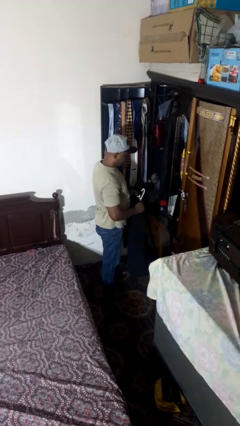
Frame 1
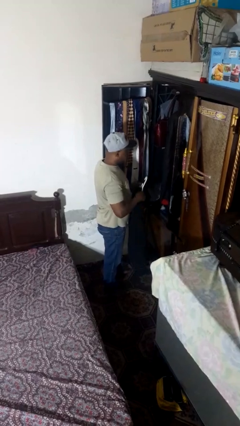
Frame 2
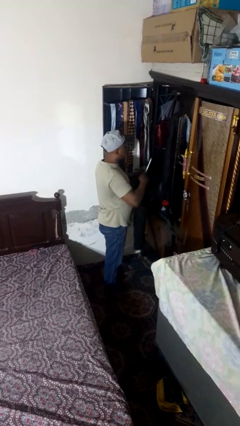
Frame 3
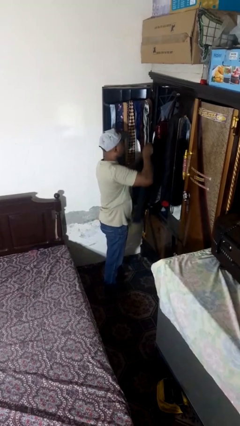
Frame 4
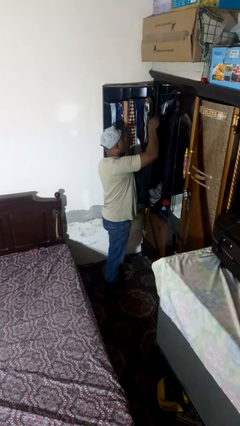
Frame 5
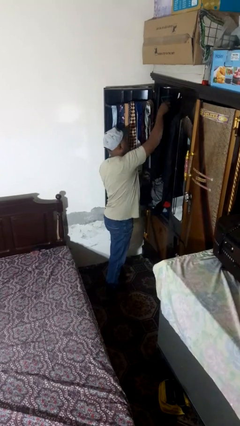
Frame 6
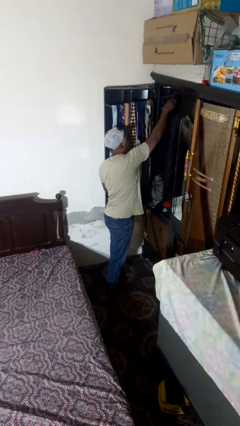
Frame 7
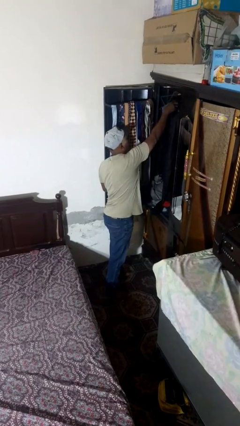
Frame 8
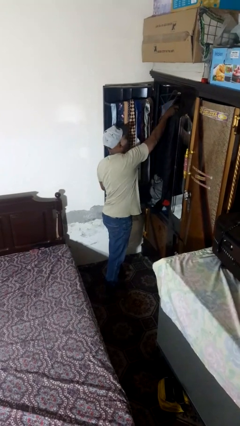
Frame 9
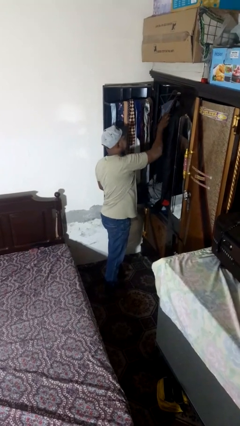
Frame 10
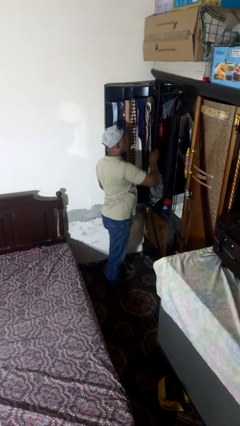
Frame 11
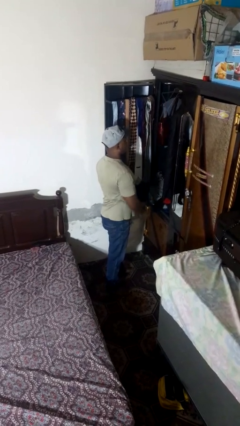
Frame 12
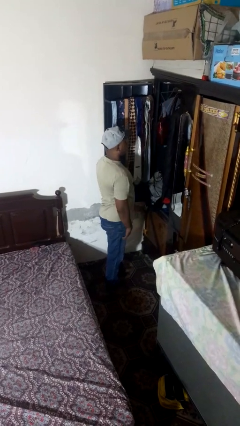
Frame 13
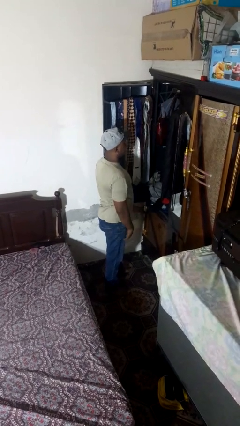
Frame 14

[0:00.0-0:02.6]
person puts clothes into closet

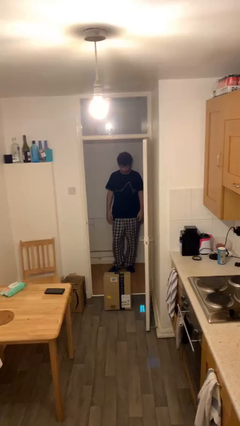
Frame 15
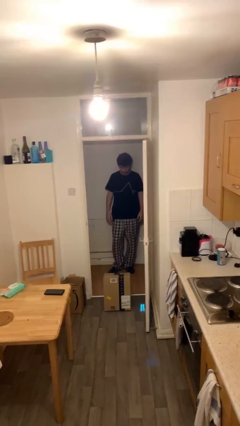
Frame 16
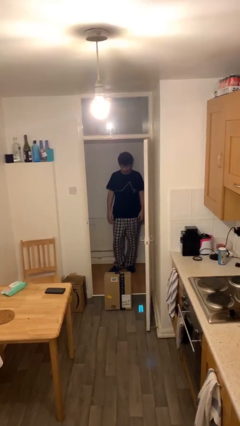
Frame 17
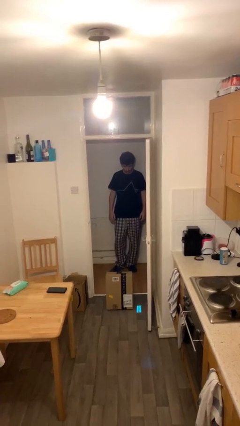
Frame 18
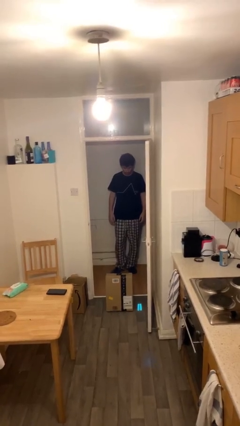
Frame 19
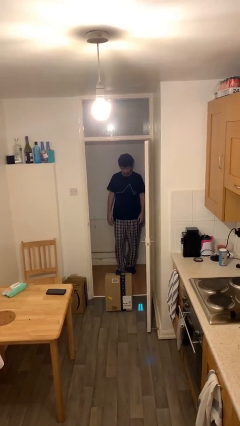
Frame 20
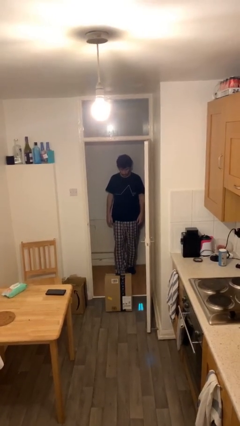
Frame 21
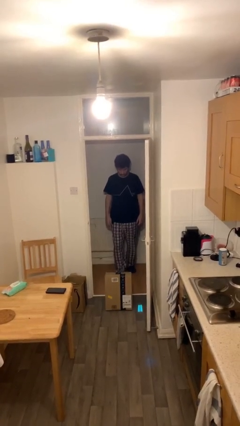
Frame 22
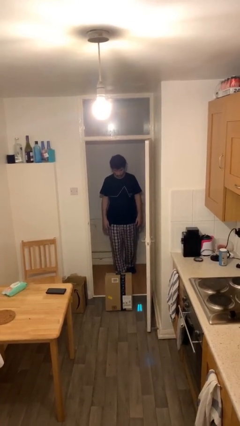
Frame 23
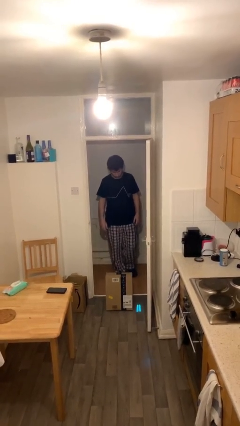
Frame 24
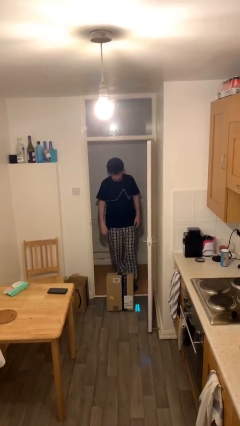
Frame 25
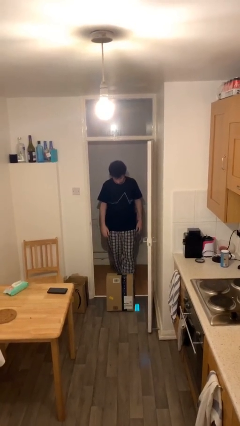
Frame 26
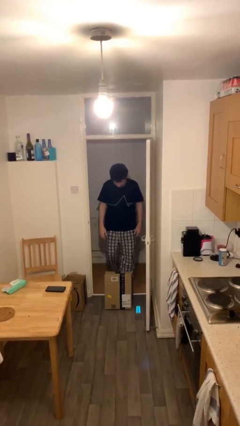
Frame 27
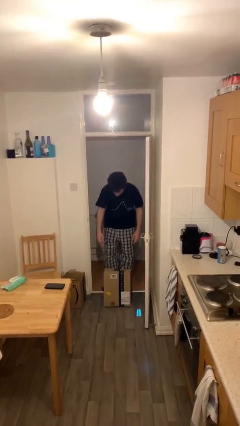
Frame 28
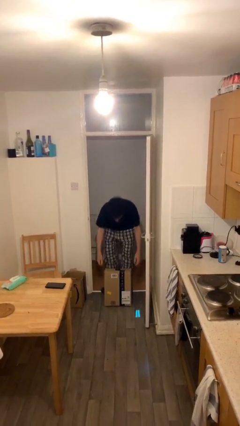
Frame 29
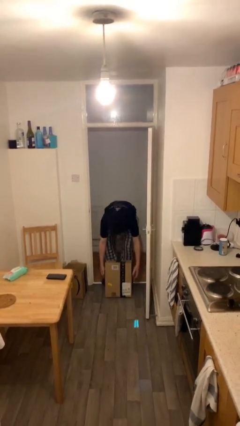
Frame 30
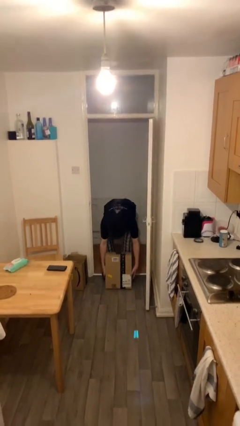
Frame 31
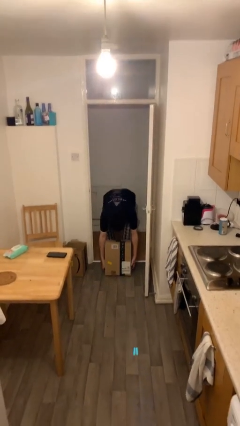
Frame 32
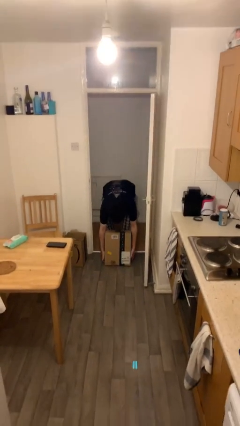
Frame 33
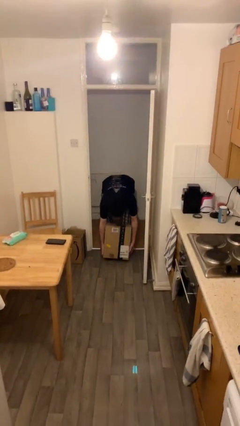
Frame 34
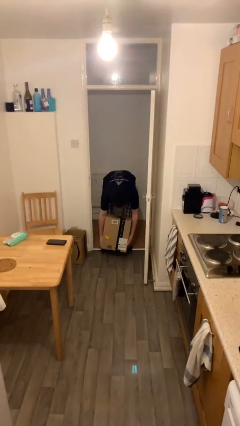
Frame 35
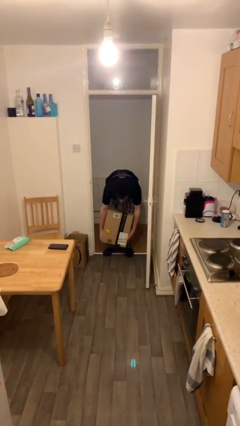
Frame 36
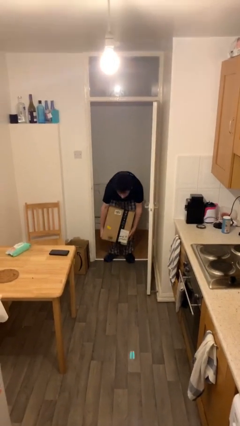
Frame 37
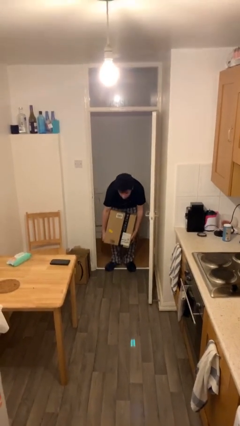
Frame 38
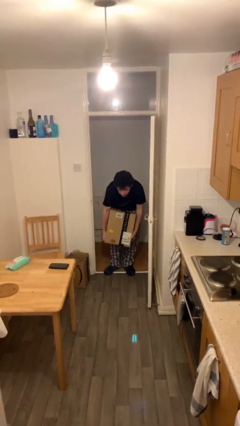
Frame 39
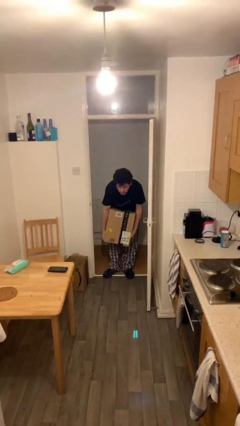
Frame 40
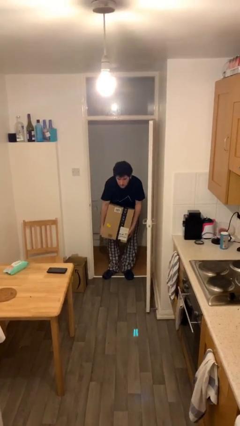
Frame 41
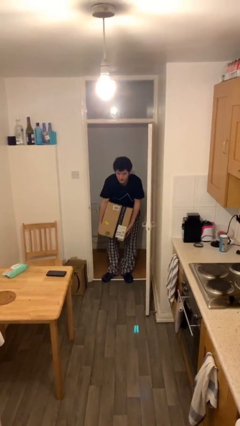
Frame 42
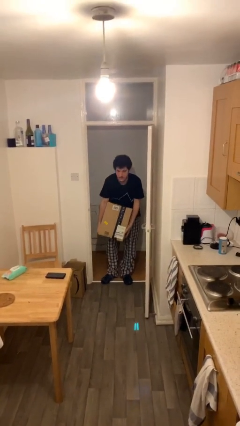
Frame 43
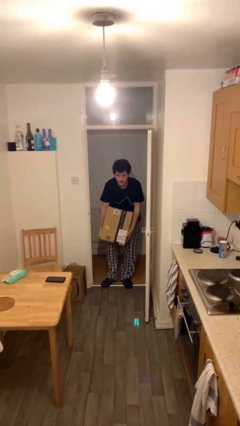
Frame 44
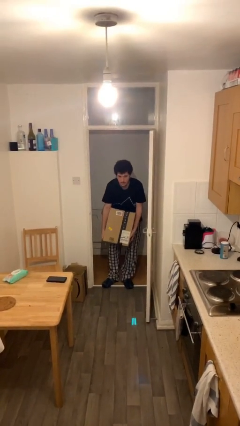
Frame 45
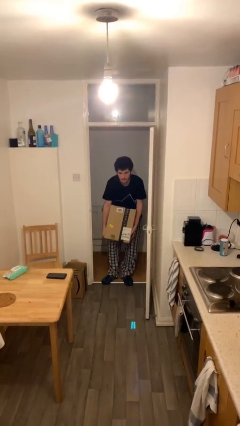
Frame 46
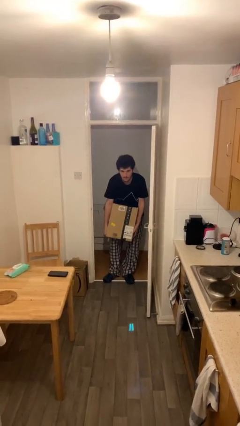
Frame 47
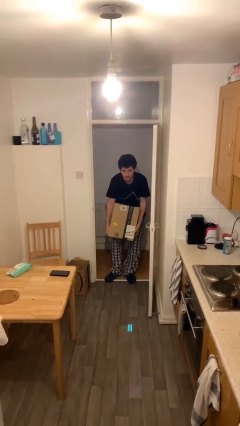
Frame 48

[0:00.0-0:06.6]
person picks up object from floor

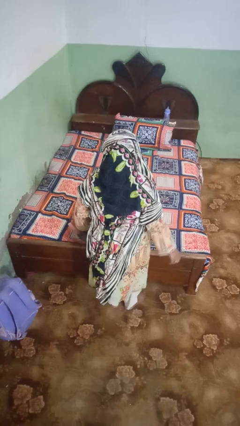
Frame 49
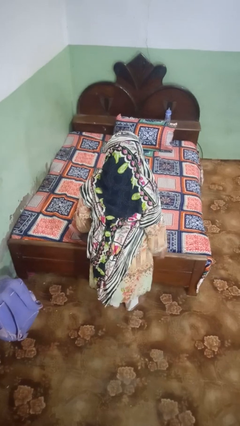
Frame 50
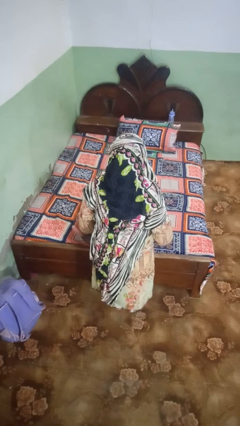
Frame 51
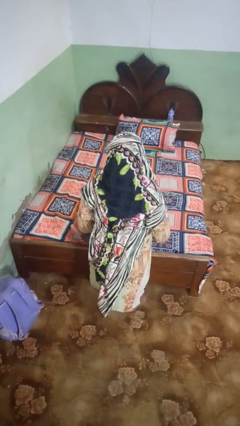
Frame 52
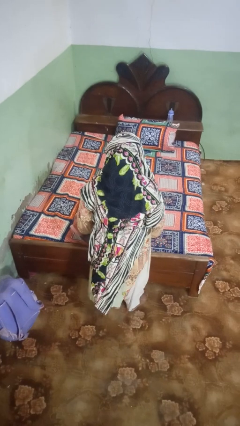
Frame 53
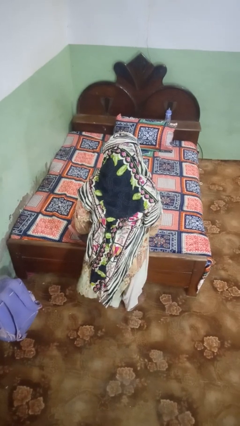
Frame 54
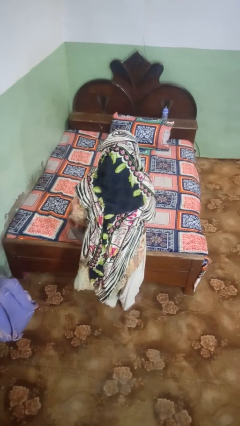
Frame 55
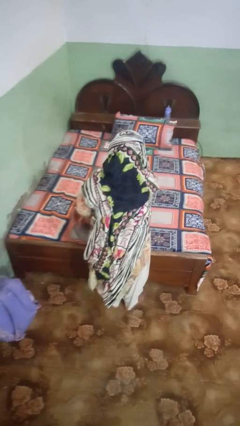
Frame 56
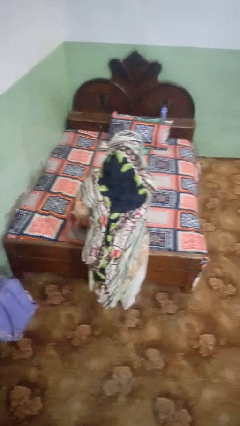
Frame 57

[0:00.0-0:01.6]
person unfolds blanket

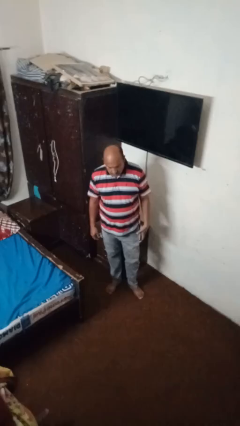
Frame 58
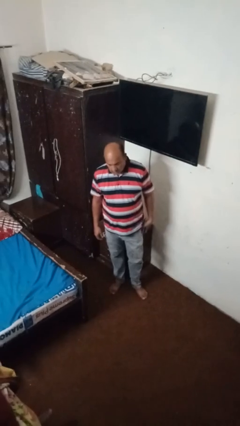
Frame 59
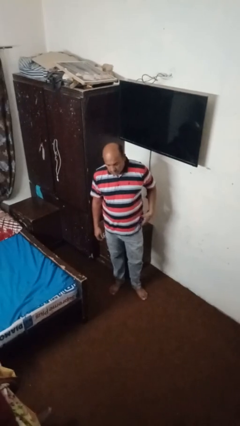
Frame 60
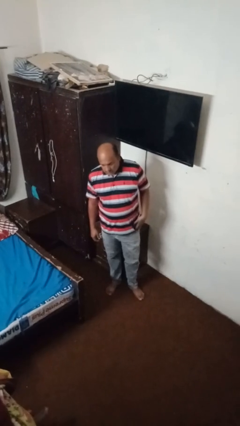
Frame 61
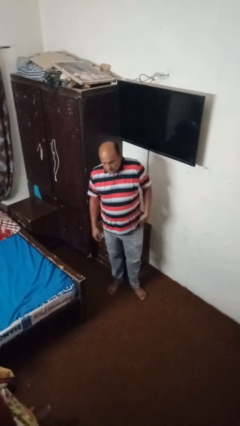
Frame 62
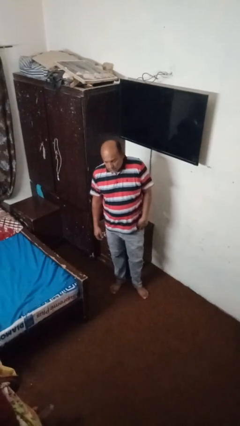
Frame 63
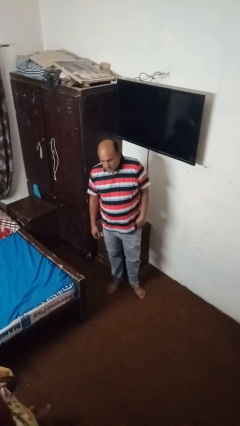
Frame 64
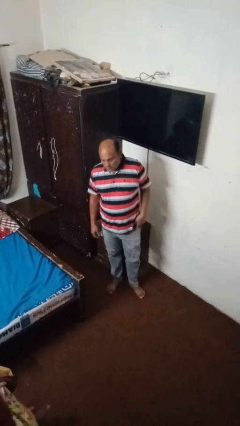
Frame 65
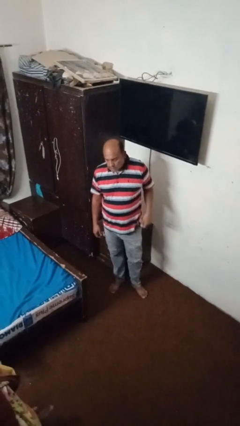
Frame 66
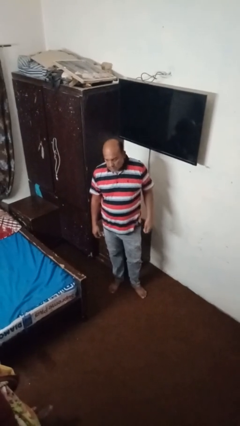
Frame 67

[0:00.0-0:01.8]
person puts phone into pocket

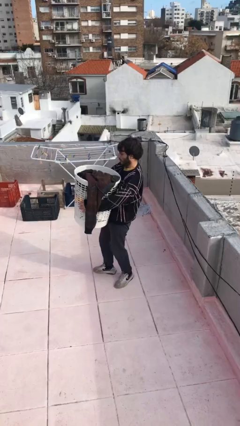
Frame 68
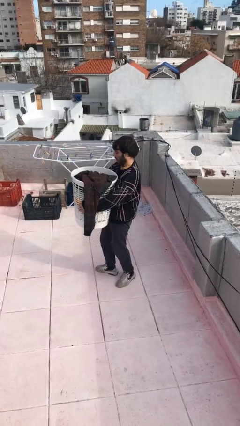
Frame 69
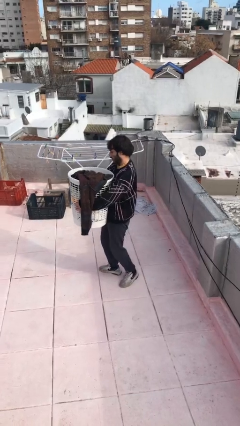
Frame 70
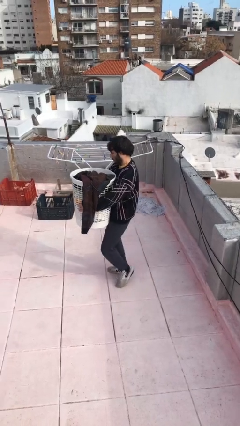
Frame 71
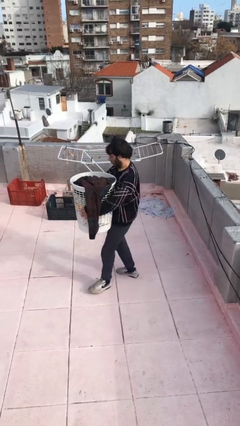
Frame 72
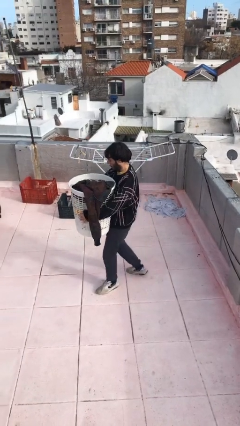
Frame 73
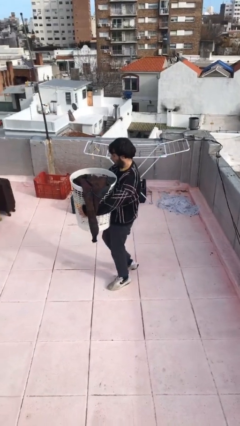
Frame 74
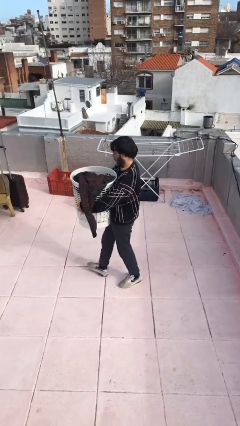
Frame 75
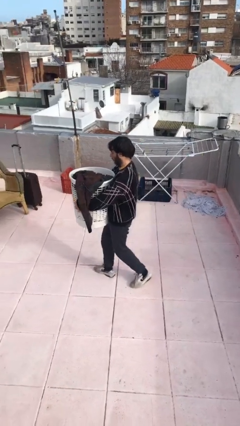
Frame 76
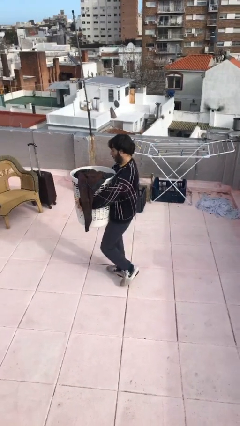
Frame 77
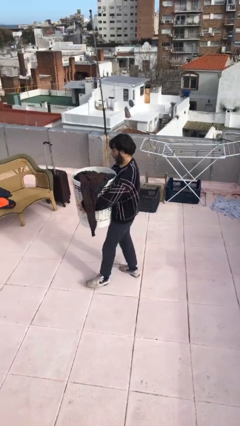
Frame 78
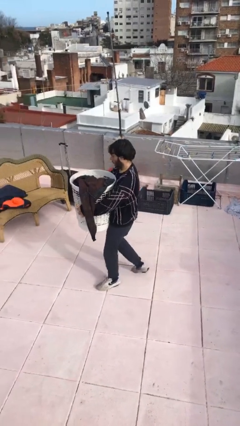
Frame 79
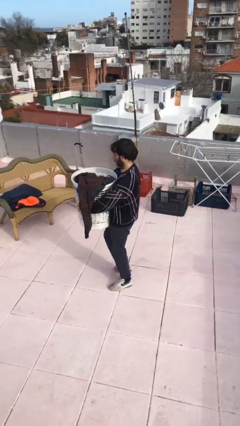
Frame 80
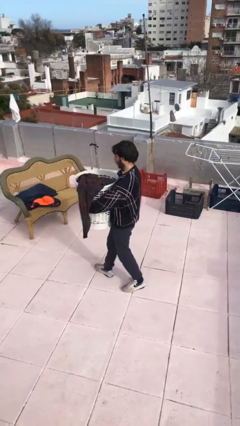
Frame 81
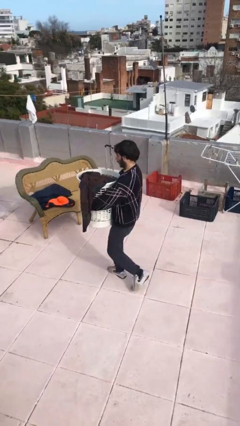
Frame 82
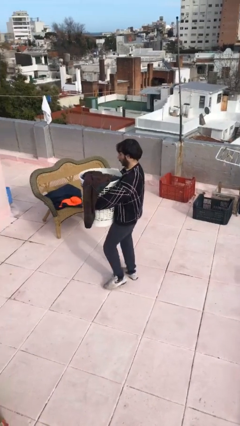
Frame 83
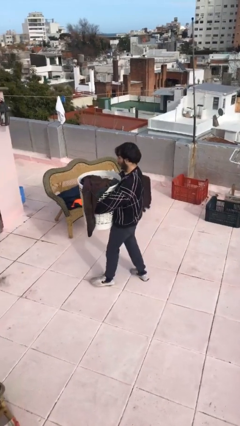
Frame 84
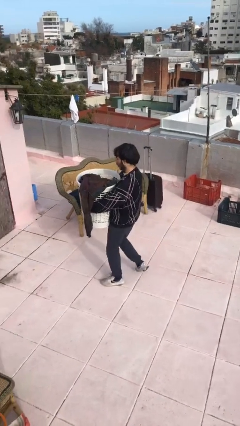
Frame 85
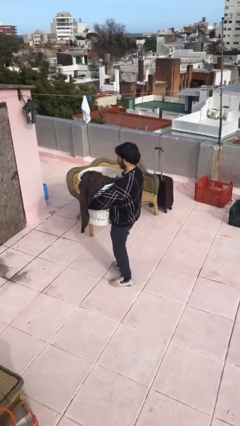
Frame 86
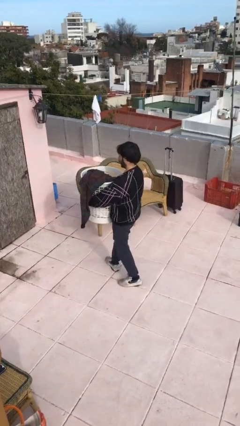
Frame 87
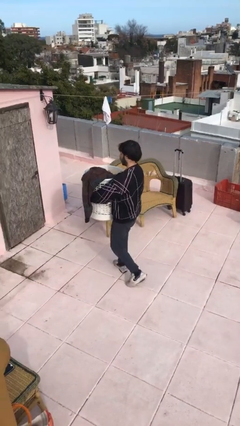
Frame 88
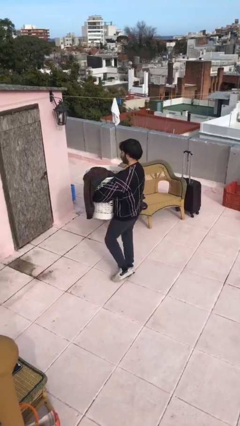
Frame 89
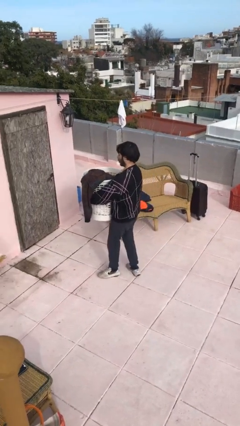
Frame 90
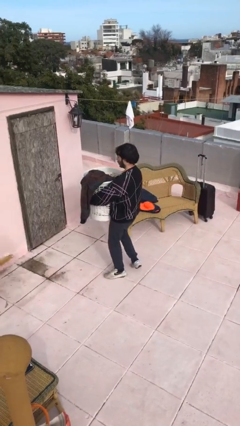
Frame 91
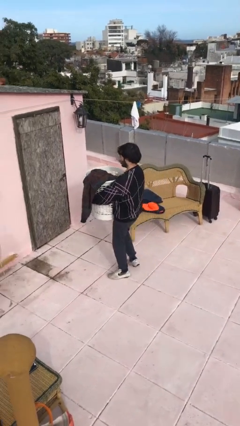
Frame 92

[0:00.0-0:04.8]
person carries laundry basket
